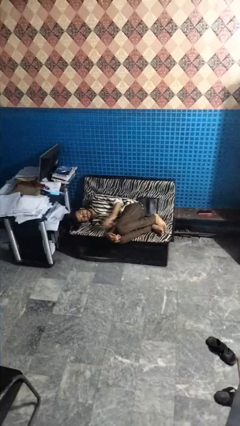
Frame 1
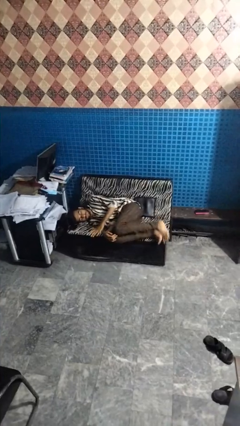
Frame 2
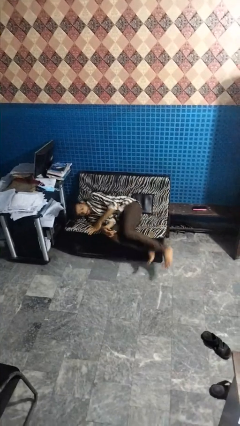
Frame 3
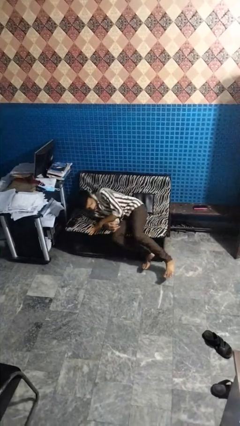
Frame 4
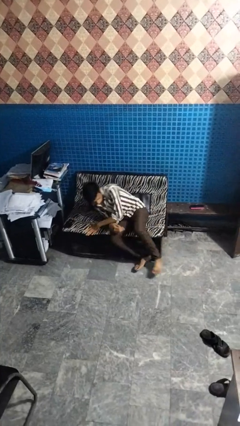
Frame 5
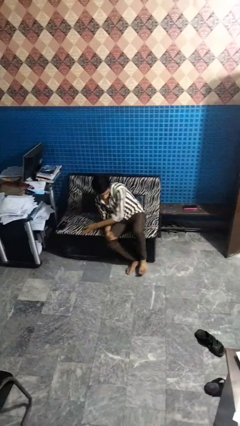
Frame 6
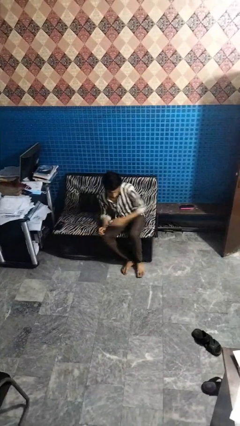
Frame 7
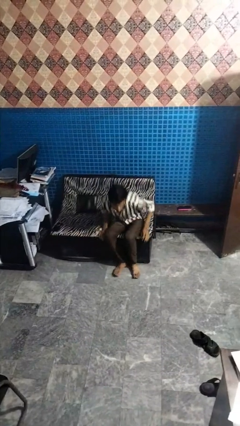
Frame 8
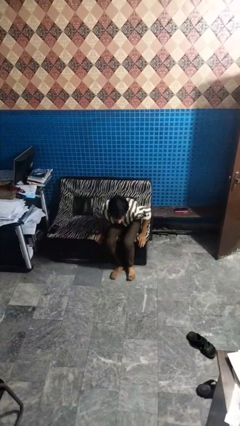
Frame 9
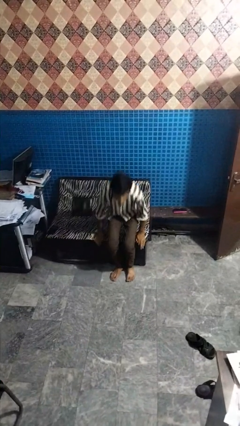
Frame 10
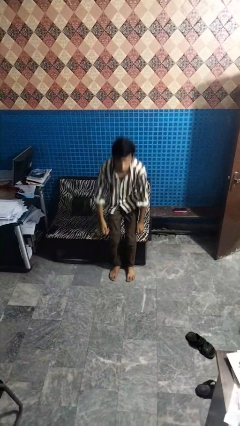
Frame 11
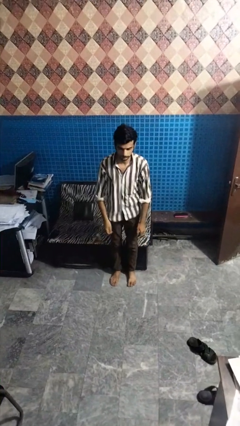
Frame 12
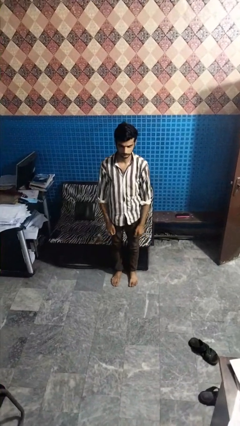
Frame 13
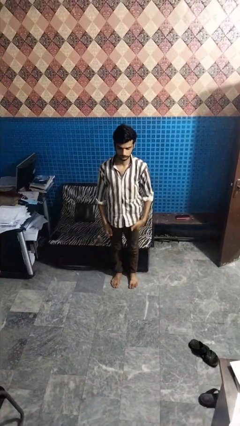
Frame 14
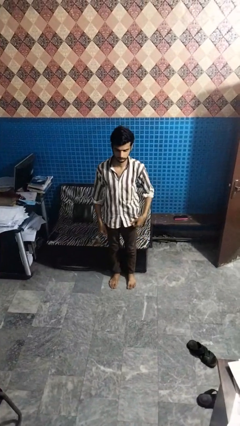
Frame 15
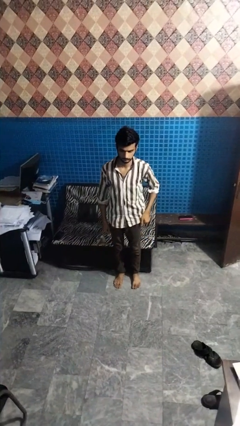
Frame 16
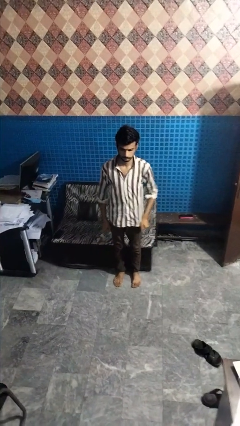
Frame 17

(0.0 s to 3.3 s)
person stands up

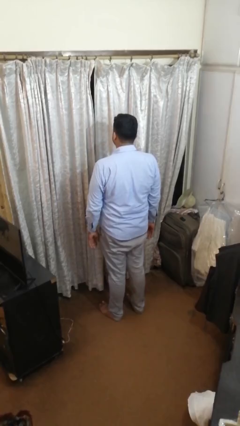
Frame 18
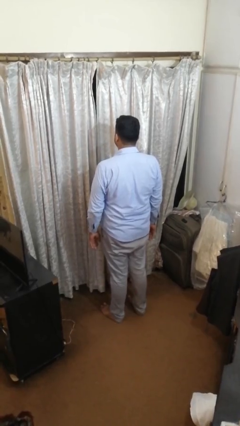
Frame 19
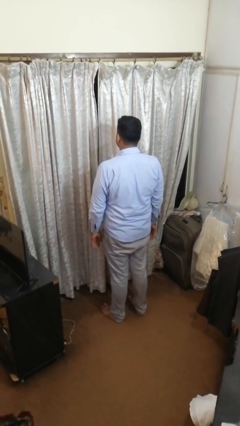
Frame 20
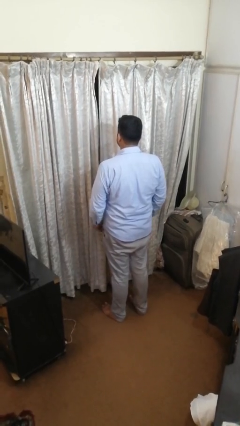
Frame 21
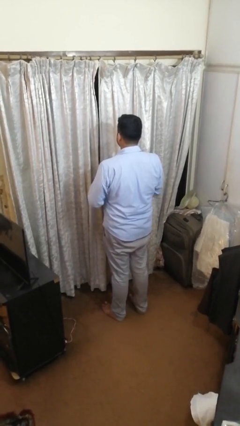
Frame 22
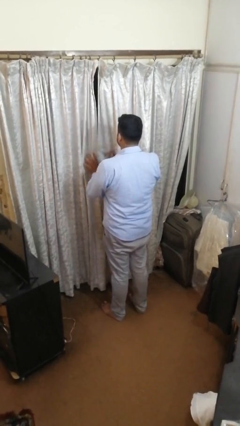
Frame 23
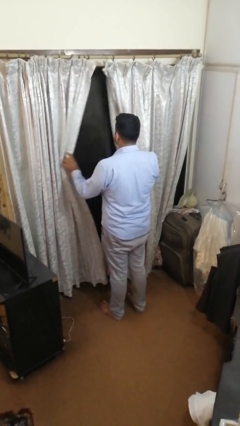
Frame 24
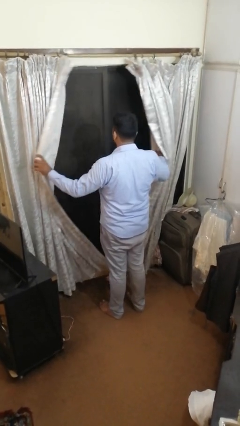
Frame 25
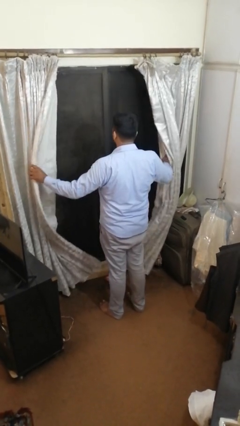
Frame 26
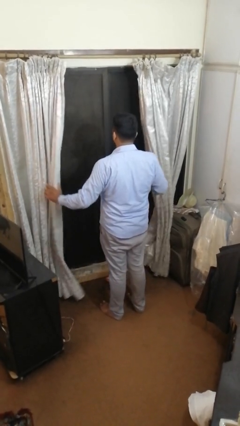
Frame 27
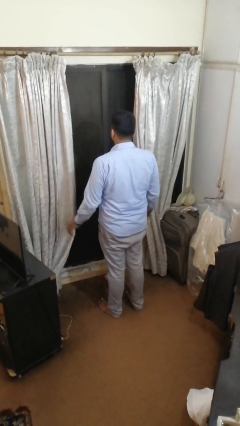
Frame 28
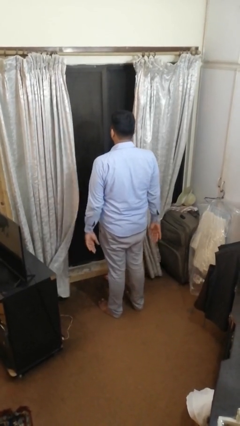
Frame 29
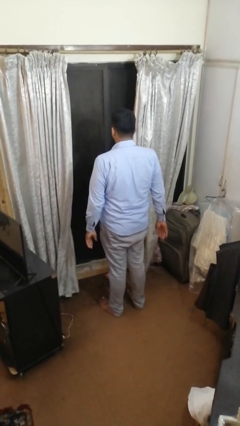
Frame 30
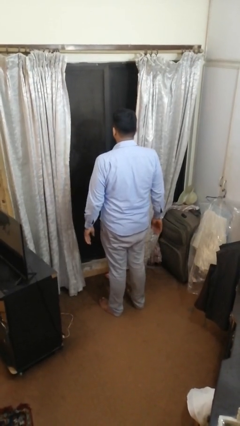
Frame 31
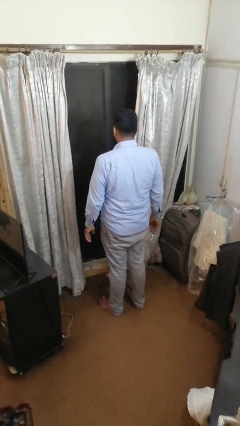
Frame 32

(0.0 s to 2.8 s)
person opens curtains

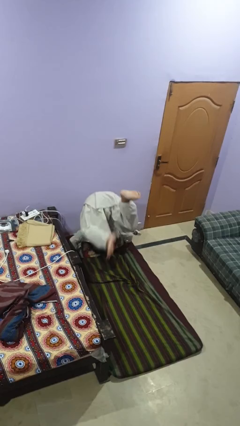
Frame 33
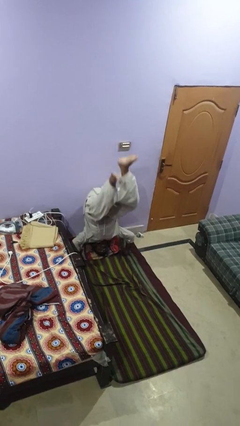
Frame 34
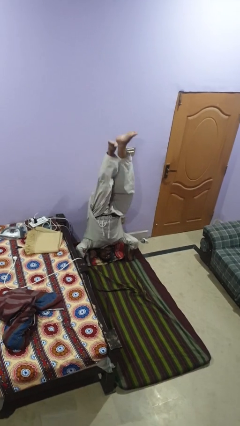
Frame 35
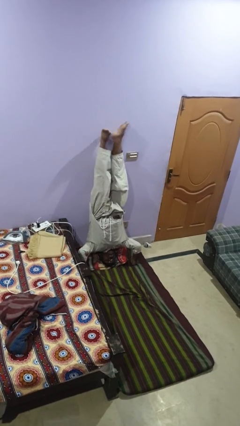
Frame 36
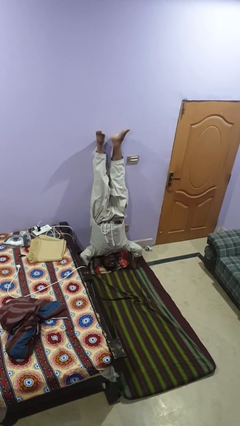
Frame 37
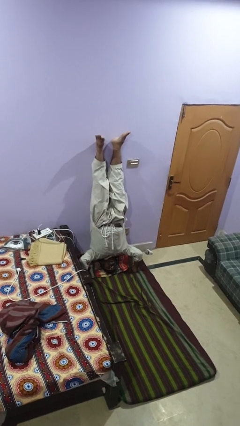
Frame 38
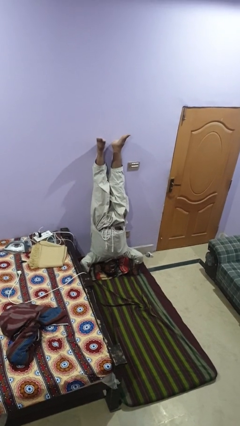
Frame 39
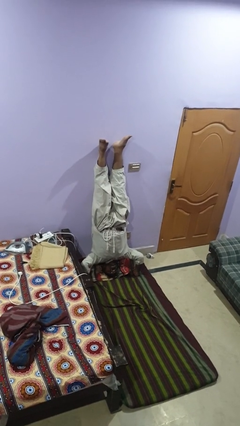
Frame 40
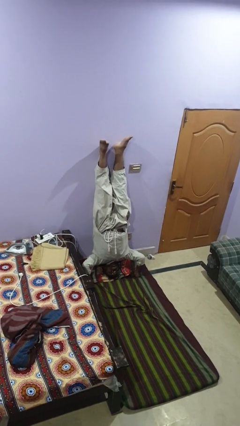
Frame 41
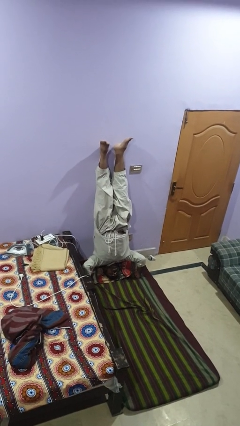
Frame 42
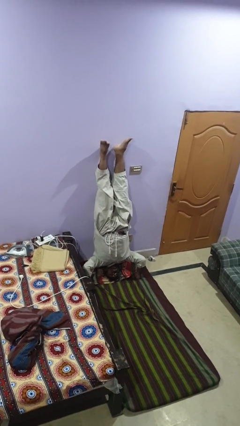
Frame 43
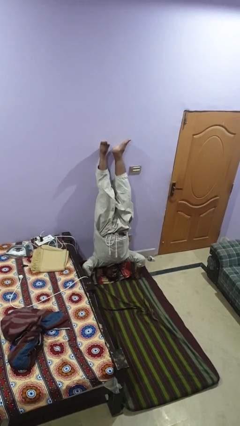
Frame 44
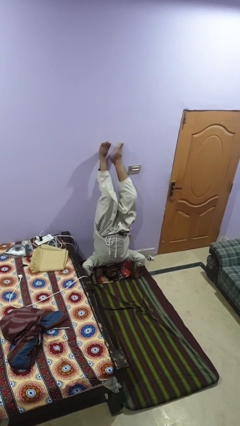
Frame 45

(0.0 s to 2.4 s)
person handstand

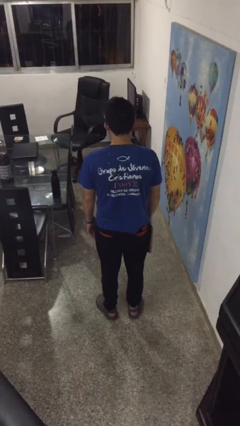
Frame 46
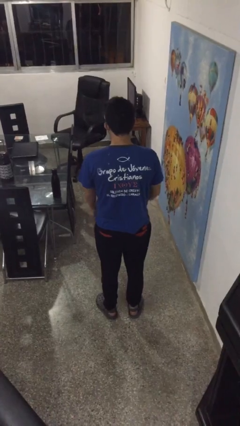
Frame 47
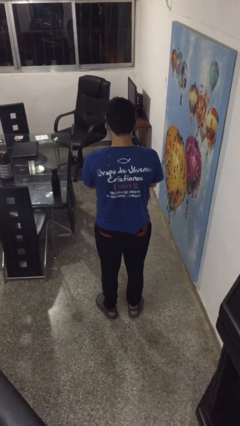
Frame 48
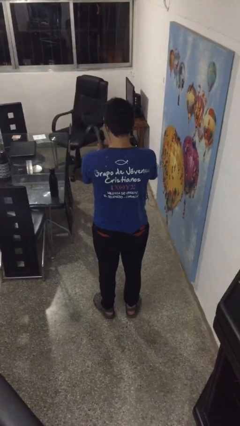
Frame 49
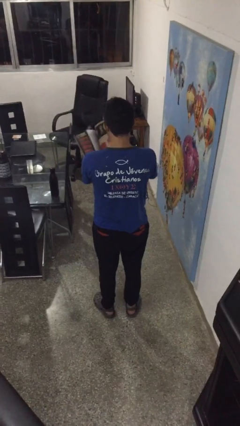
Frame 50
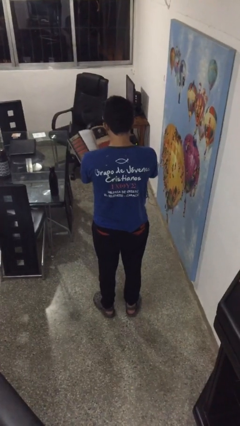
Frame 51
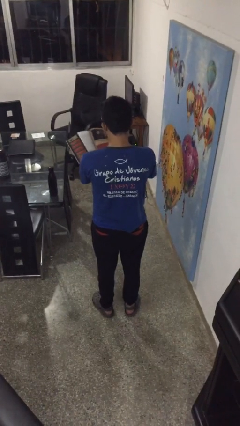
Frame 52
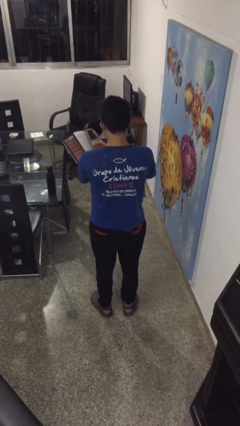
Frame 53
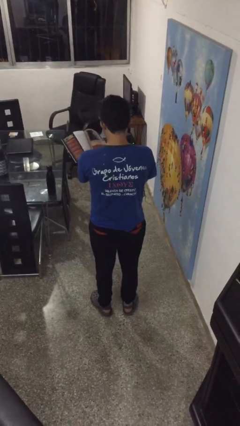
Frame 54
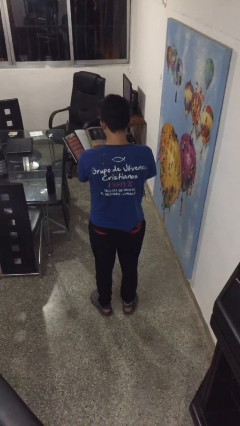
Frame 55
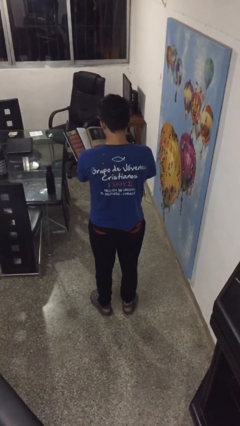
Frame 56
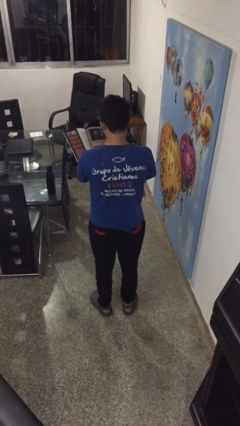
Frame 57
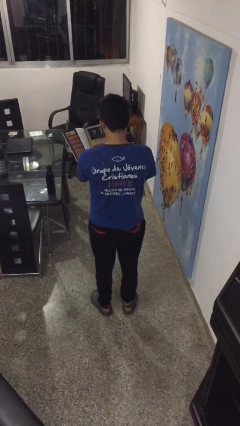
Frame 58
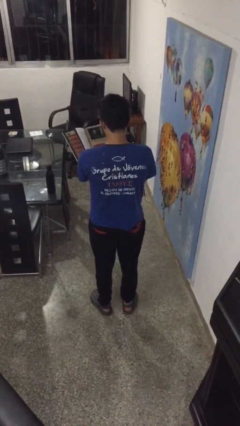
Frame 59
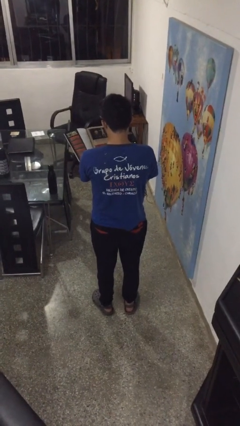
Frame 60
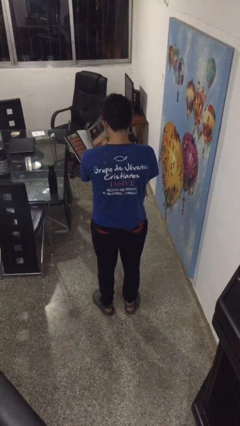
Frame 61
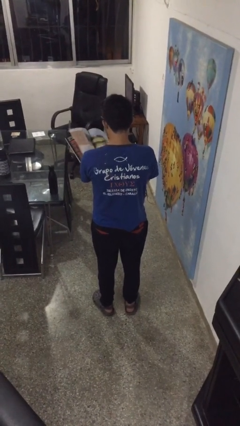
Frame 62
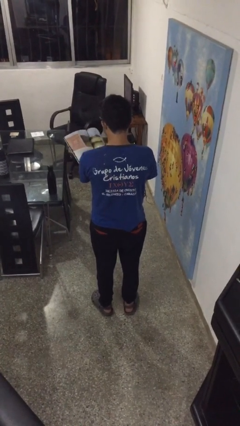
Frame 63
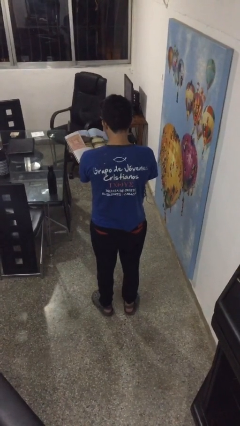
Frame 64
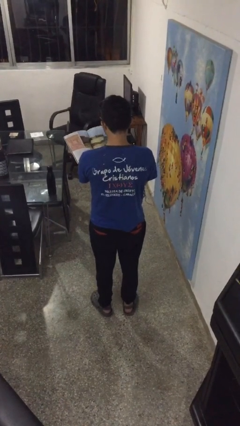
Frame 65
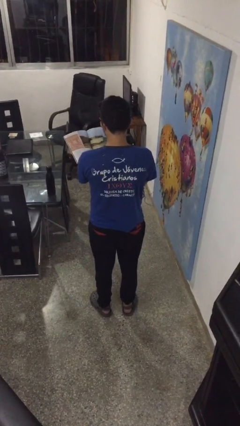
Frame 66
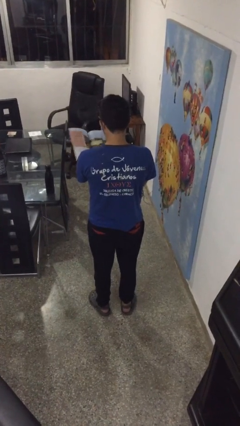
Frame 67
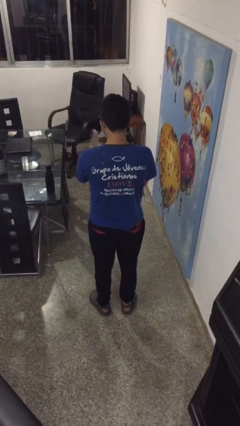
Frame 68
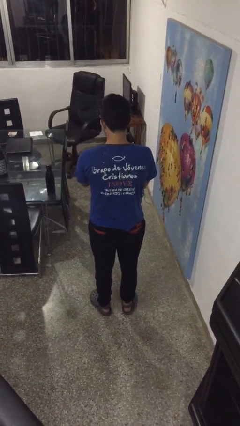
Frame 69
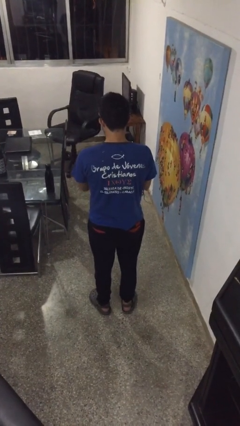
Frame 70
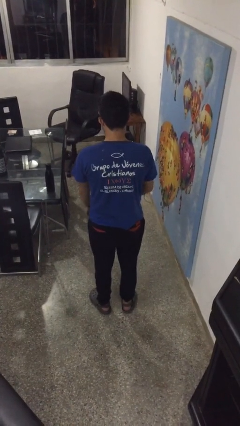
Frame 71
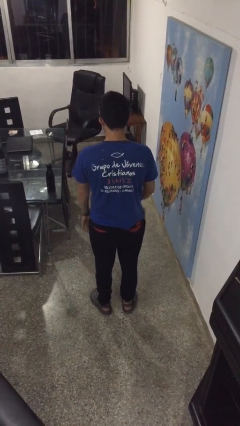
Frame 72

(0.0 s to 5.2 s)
person reads magazine

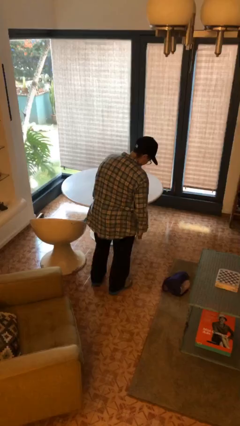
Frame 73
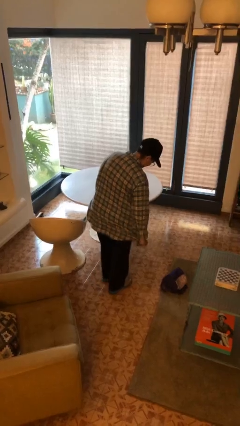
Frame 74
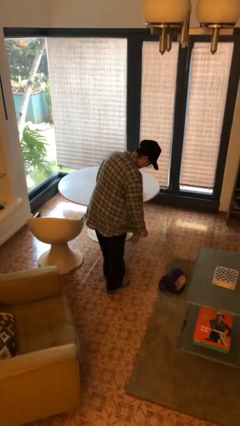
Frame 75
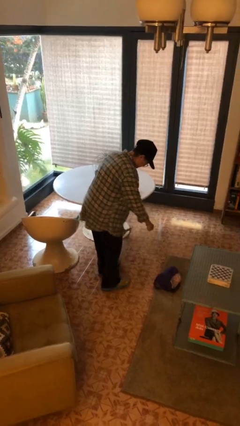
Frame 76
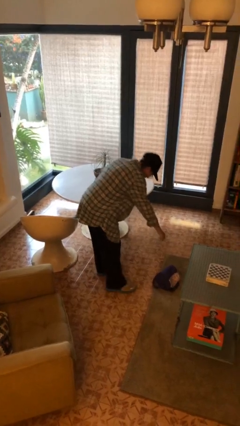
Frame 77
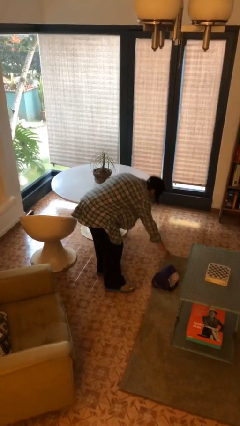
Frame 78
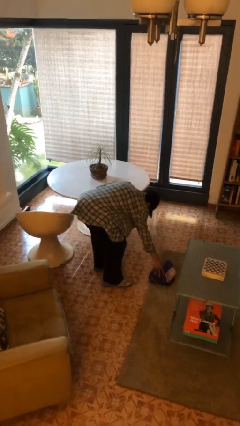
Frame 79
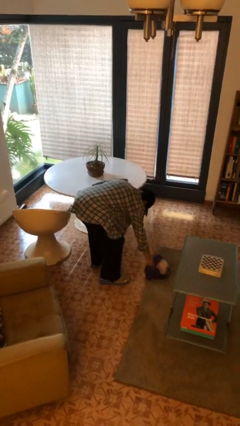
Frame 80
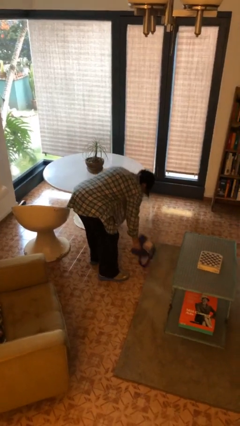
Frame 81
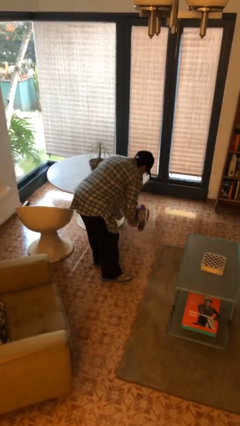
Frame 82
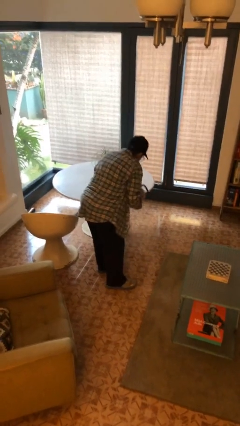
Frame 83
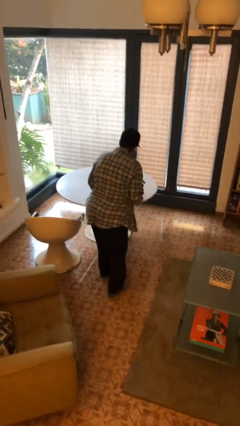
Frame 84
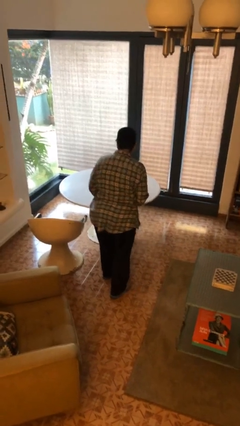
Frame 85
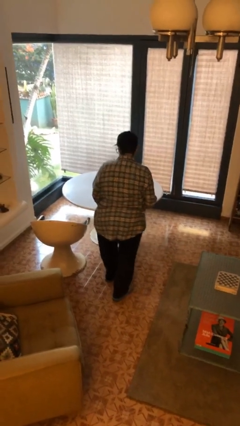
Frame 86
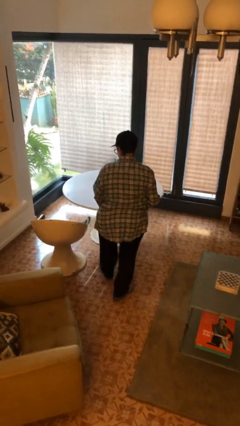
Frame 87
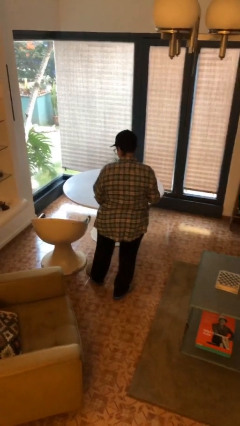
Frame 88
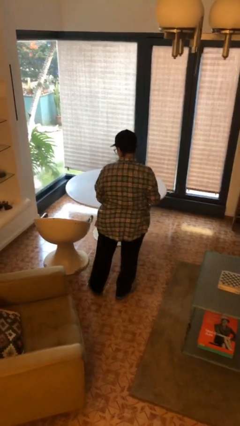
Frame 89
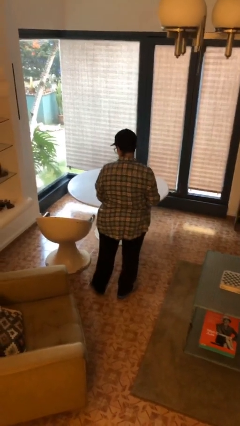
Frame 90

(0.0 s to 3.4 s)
person picks up object from floor

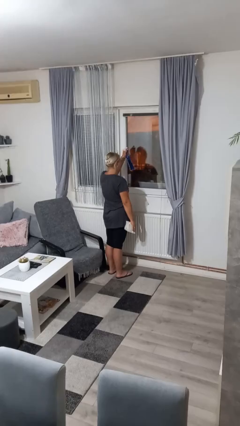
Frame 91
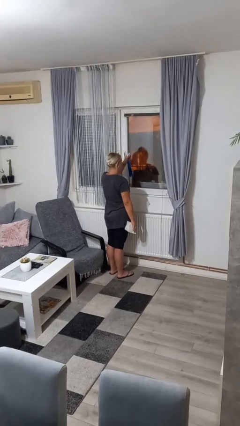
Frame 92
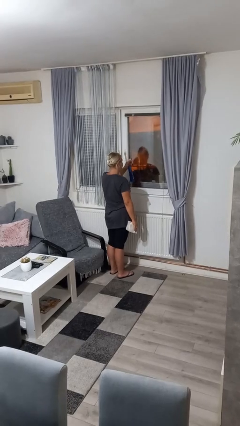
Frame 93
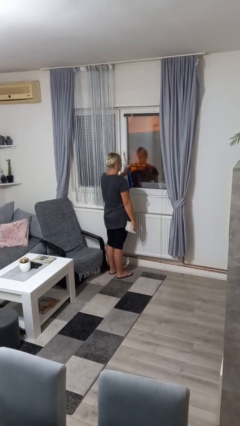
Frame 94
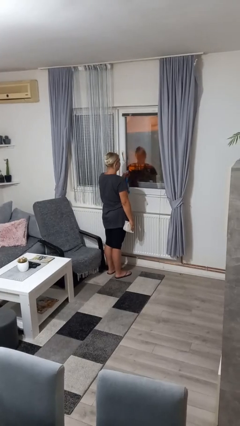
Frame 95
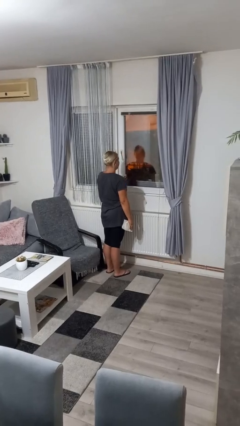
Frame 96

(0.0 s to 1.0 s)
person sprays from bottle
